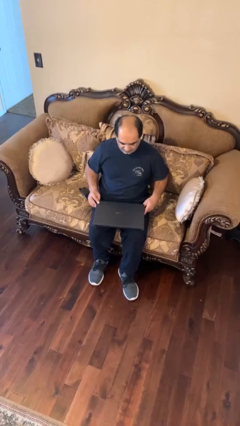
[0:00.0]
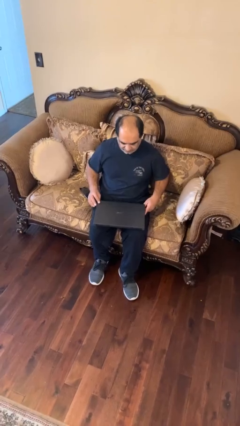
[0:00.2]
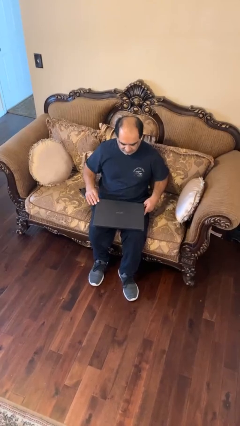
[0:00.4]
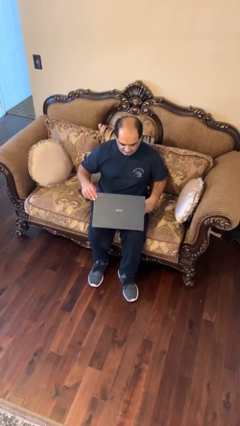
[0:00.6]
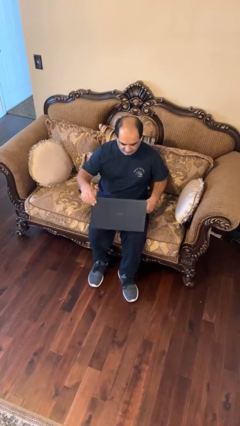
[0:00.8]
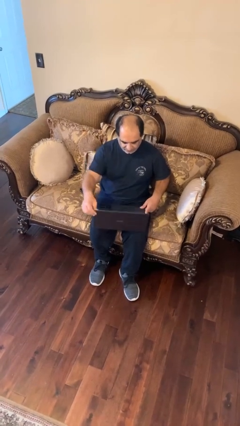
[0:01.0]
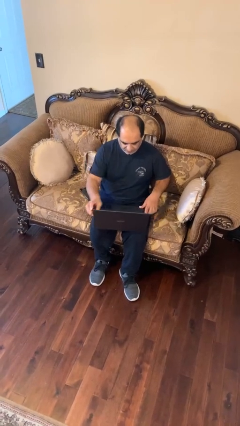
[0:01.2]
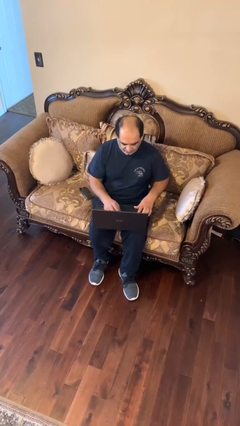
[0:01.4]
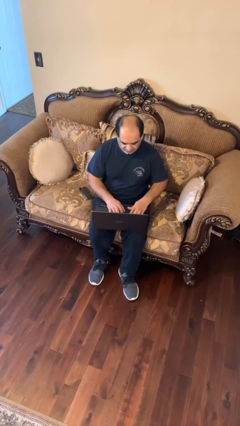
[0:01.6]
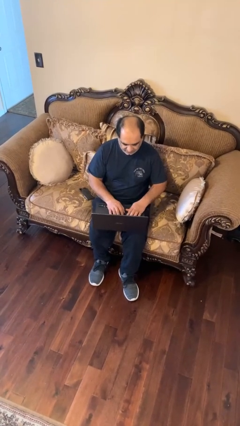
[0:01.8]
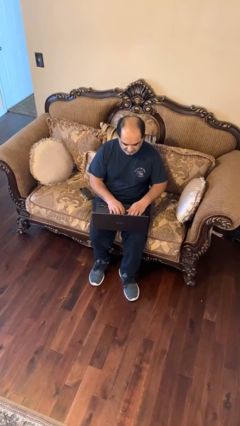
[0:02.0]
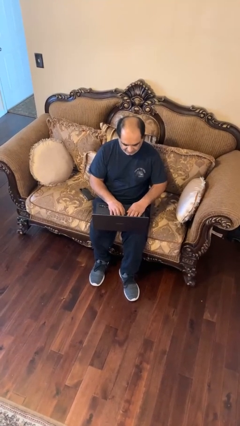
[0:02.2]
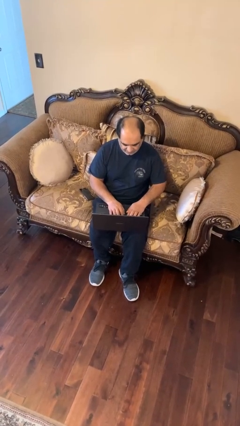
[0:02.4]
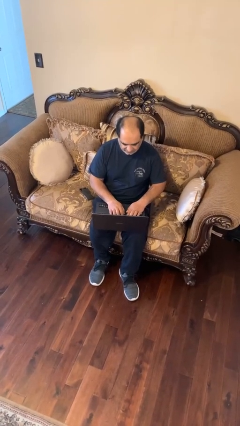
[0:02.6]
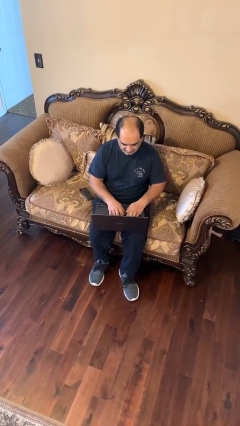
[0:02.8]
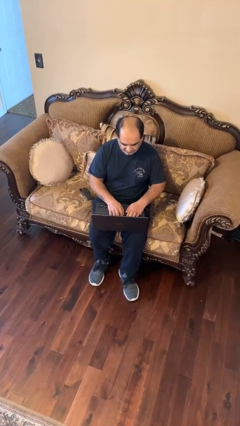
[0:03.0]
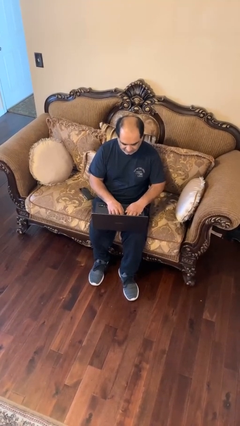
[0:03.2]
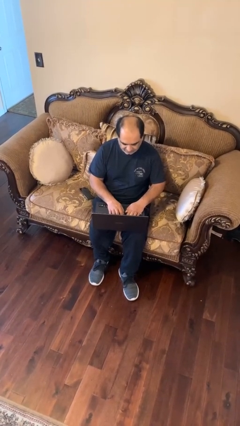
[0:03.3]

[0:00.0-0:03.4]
person interacts with laptop

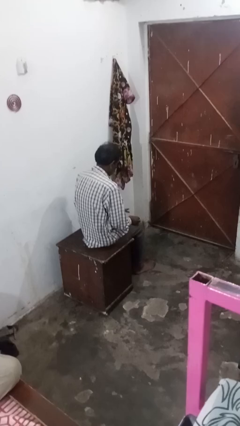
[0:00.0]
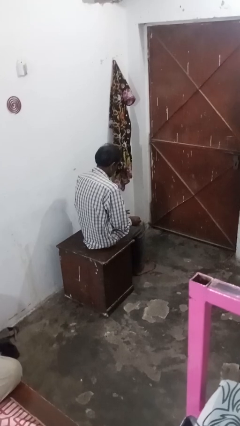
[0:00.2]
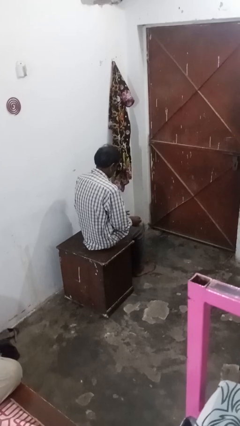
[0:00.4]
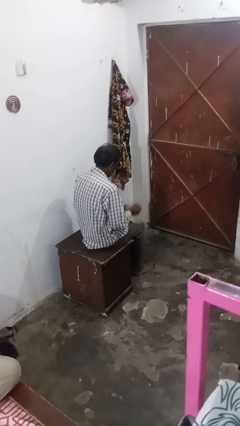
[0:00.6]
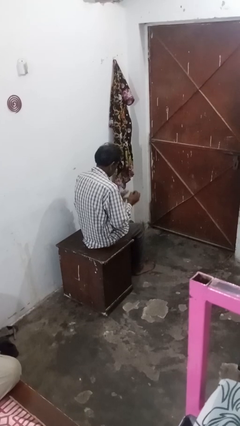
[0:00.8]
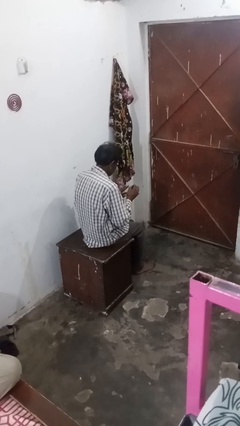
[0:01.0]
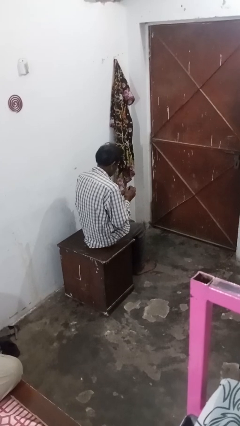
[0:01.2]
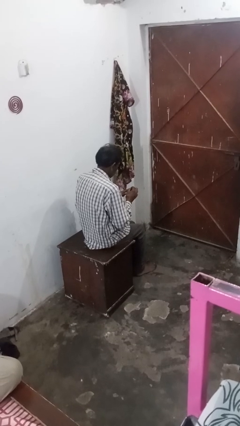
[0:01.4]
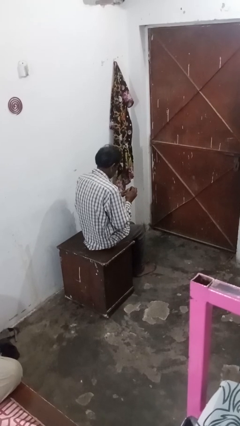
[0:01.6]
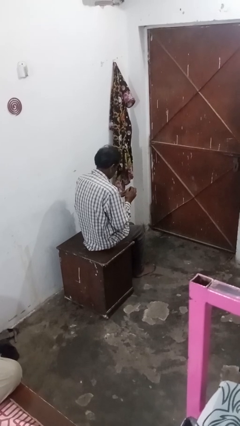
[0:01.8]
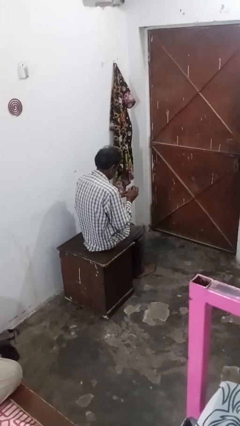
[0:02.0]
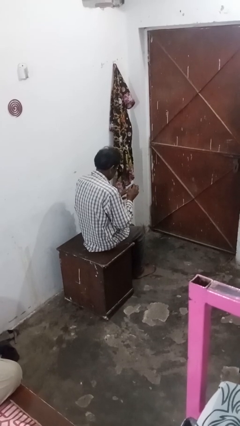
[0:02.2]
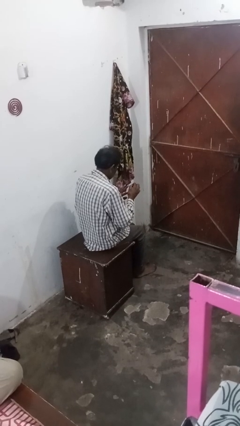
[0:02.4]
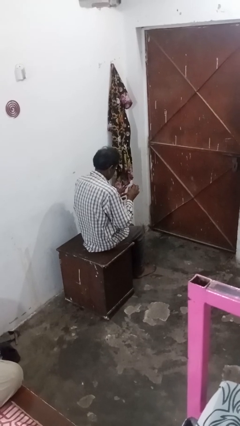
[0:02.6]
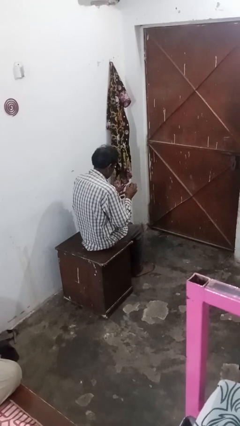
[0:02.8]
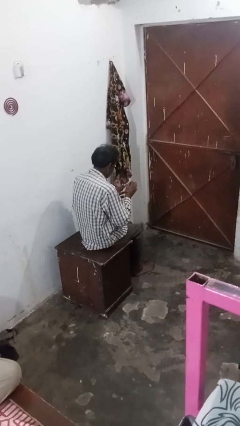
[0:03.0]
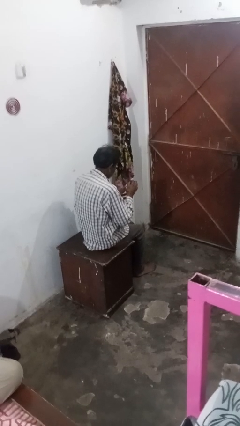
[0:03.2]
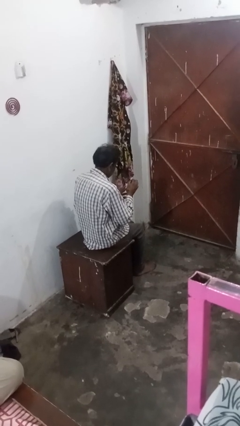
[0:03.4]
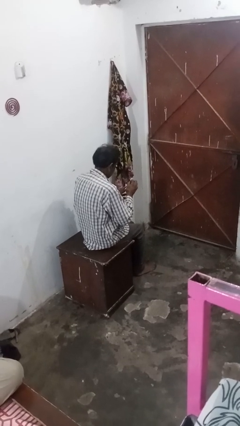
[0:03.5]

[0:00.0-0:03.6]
person paints fingernails

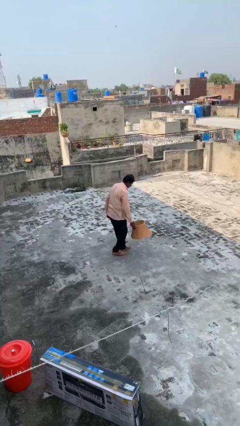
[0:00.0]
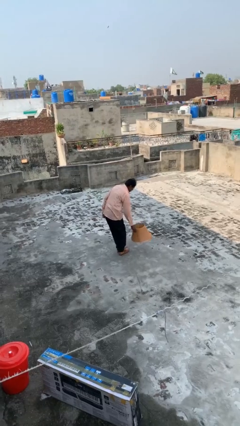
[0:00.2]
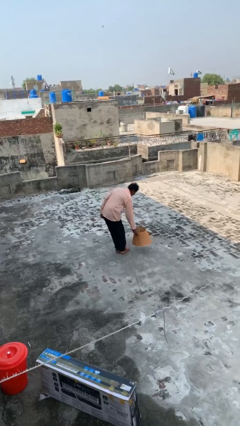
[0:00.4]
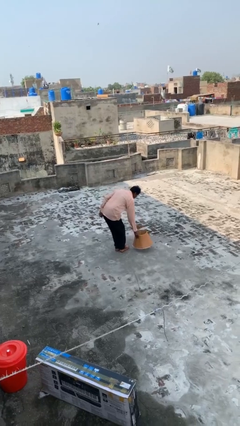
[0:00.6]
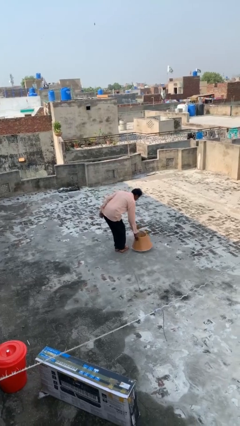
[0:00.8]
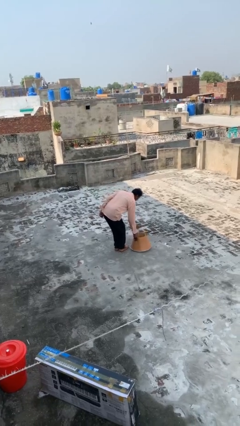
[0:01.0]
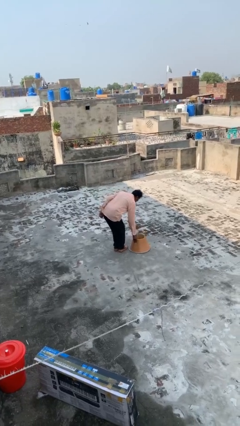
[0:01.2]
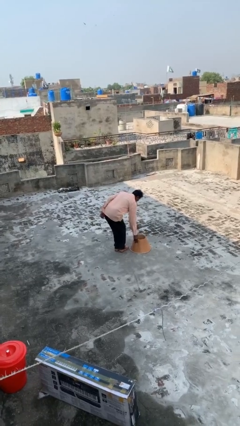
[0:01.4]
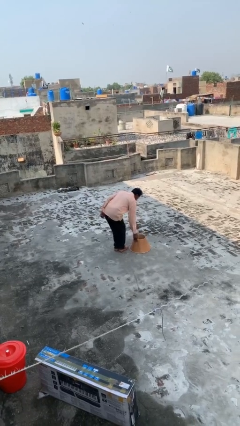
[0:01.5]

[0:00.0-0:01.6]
person puts down object on floor

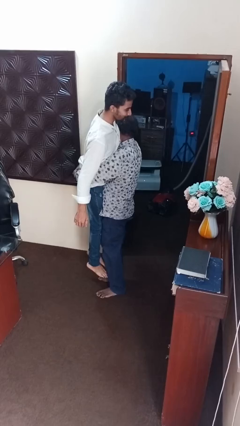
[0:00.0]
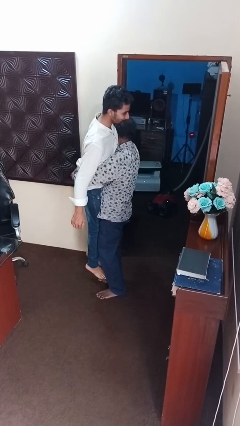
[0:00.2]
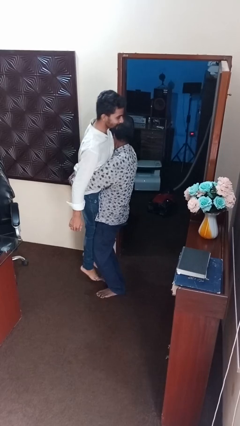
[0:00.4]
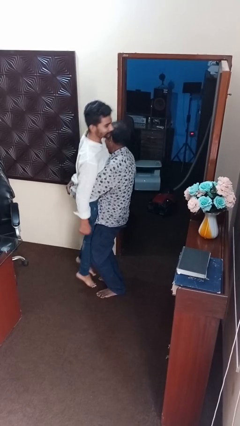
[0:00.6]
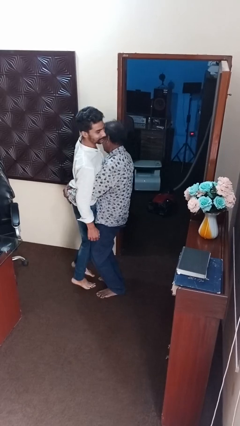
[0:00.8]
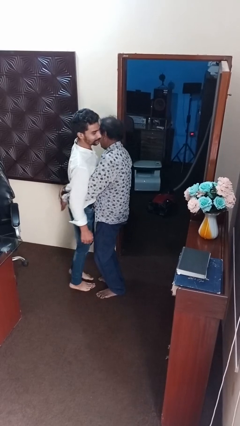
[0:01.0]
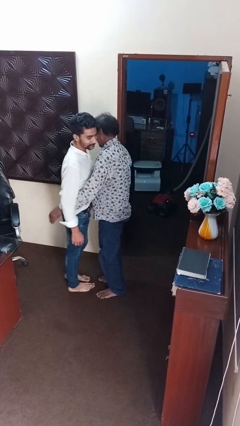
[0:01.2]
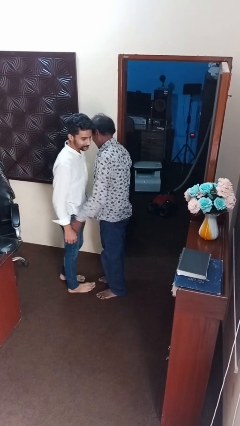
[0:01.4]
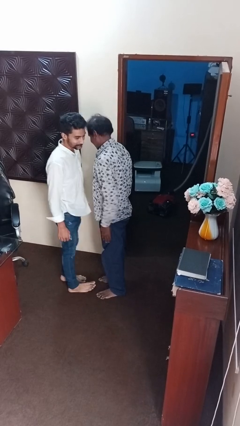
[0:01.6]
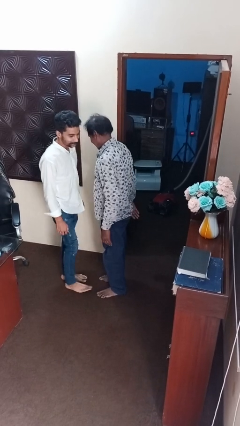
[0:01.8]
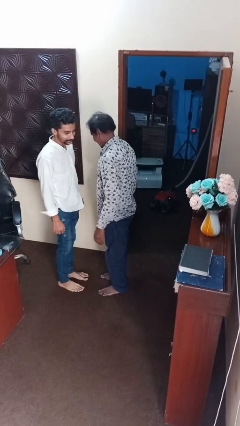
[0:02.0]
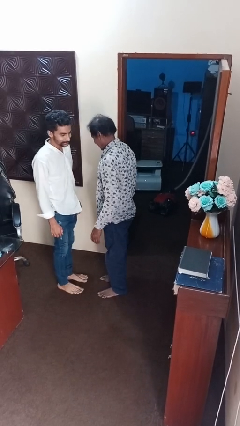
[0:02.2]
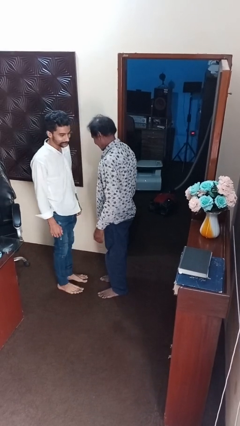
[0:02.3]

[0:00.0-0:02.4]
person puts down person

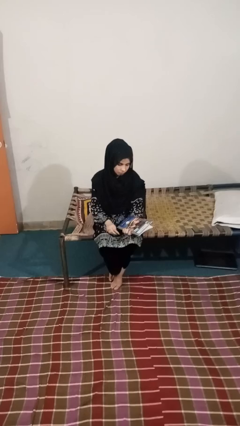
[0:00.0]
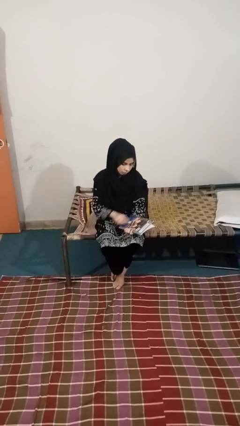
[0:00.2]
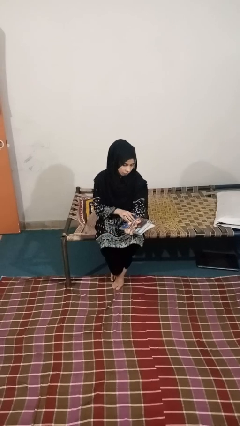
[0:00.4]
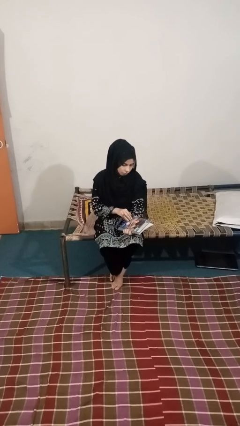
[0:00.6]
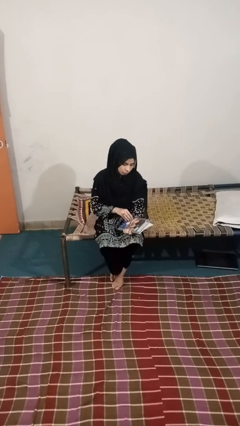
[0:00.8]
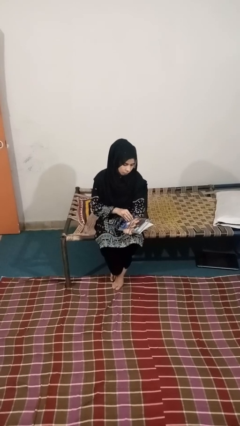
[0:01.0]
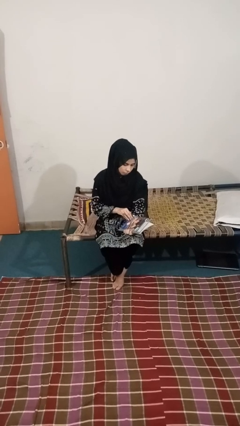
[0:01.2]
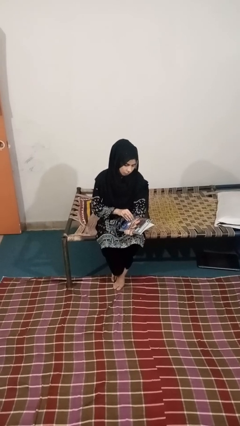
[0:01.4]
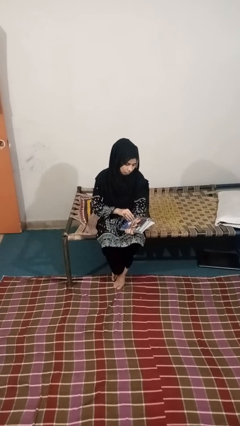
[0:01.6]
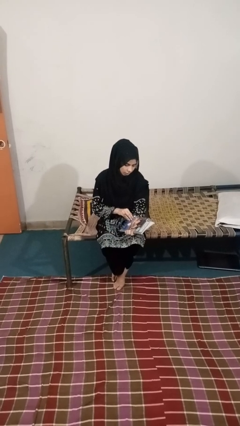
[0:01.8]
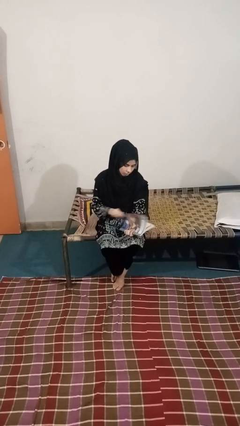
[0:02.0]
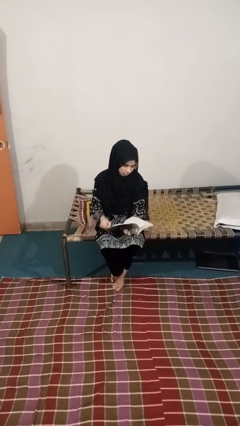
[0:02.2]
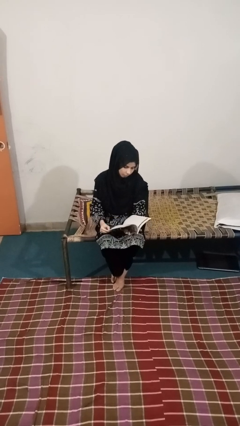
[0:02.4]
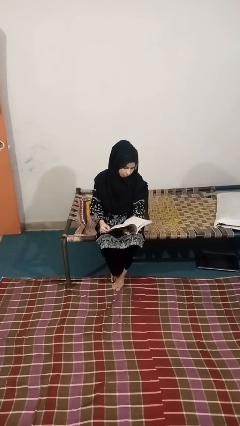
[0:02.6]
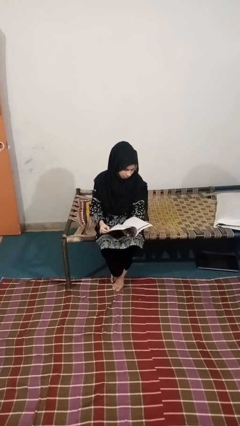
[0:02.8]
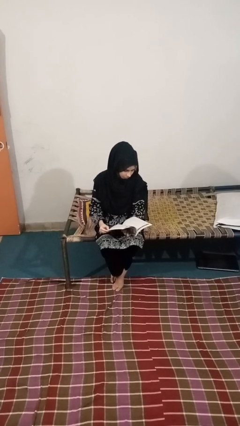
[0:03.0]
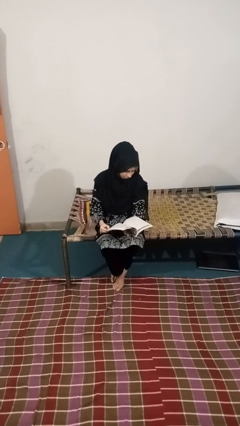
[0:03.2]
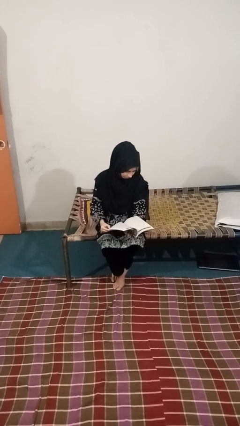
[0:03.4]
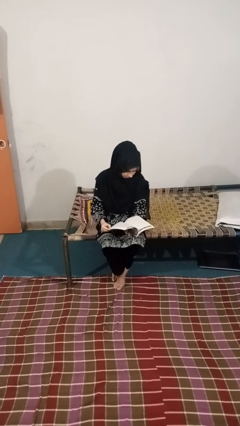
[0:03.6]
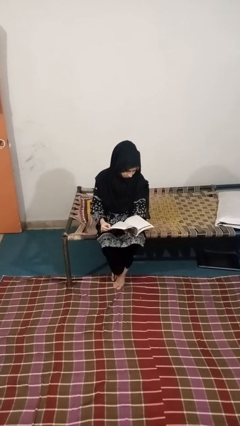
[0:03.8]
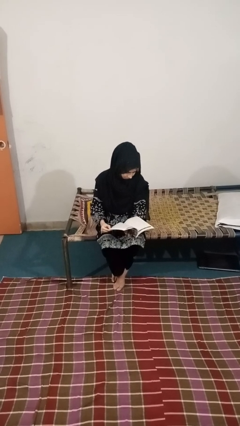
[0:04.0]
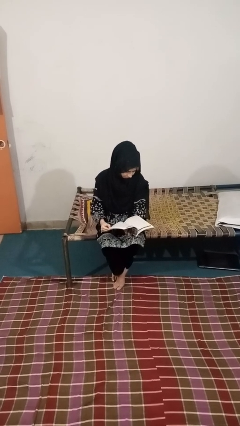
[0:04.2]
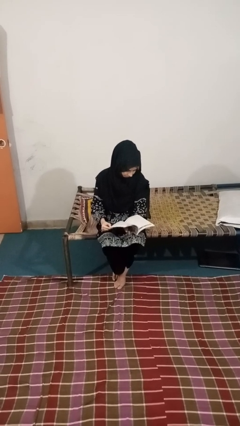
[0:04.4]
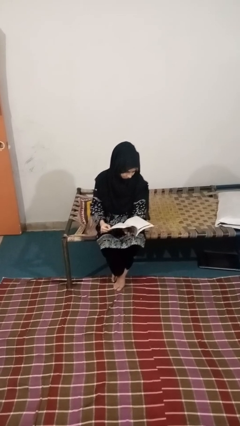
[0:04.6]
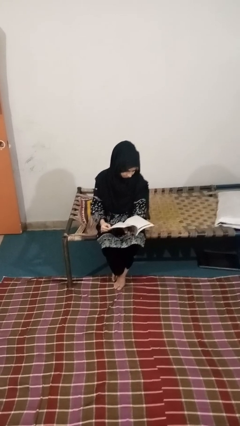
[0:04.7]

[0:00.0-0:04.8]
person reads book

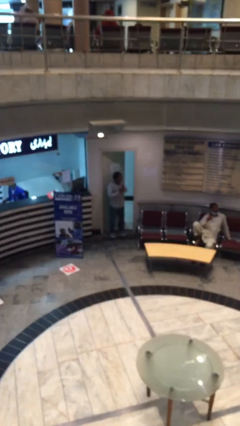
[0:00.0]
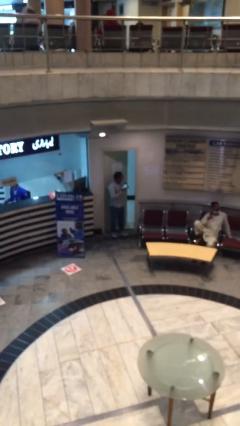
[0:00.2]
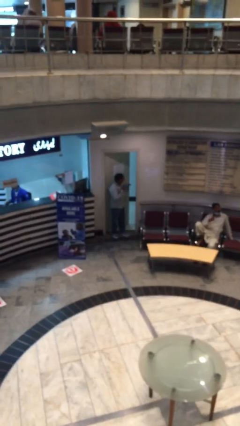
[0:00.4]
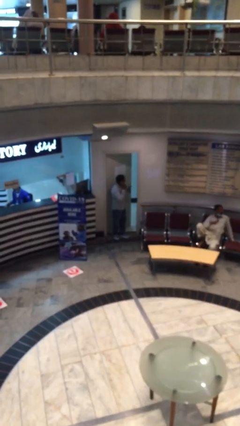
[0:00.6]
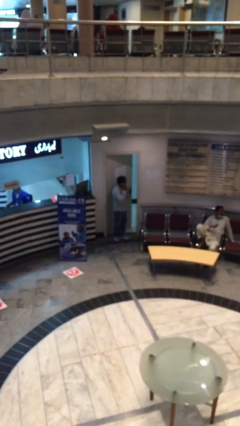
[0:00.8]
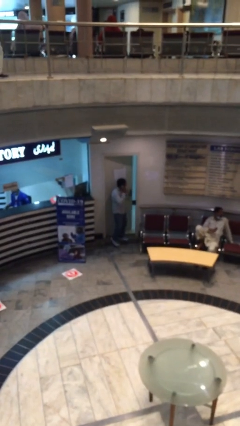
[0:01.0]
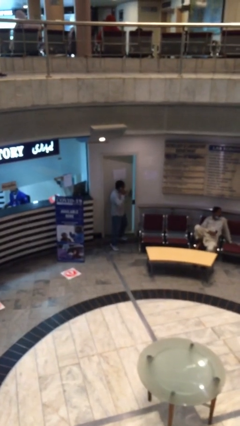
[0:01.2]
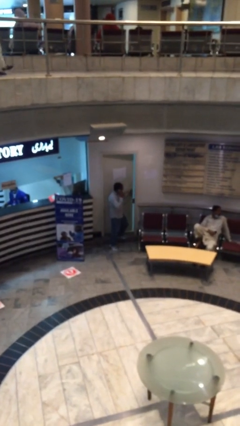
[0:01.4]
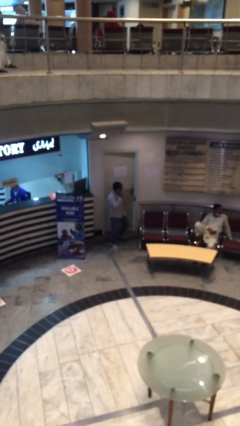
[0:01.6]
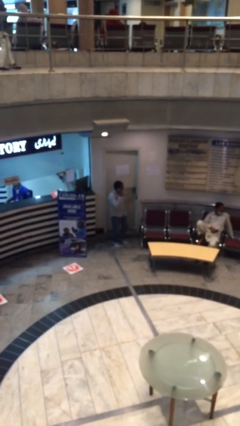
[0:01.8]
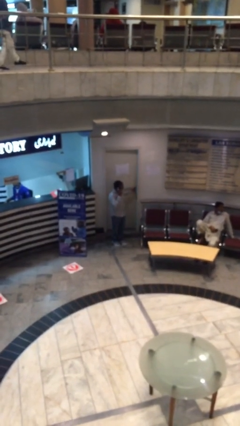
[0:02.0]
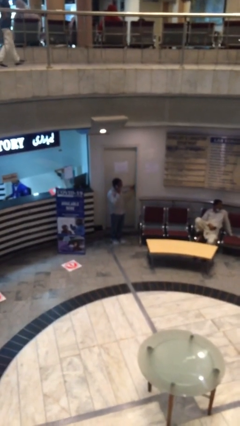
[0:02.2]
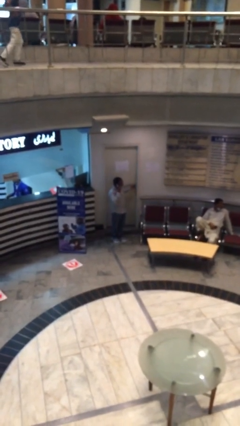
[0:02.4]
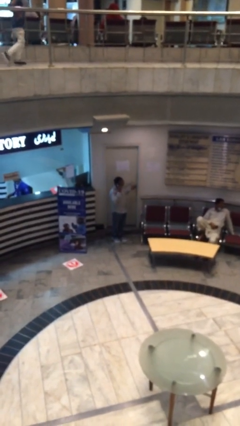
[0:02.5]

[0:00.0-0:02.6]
person closes facility door
